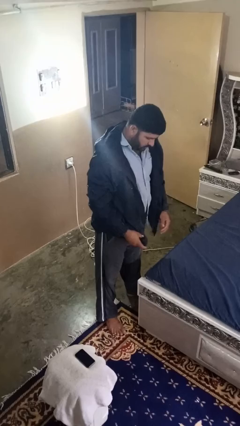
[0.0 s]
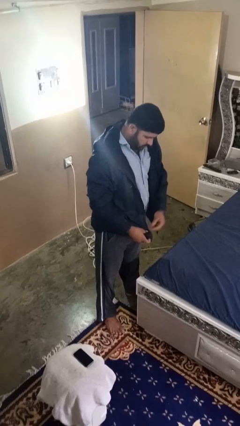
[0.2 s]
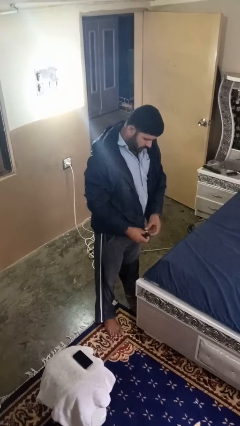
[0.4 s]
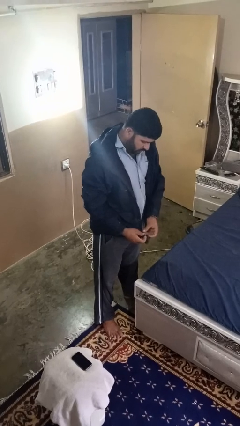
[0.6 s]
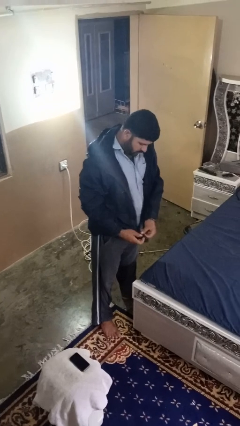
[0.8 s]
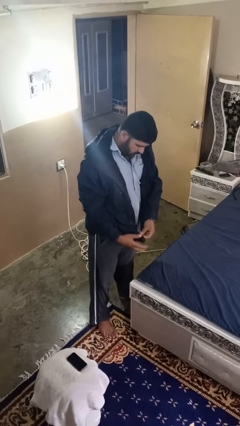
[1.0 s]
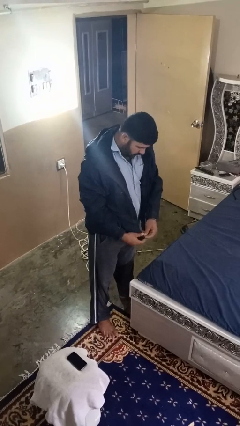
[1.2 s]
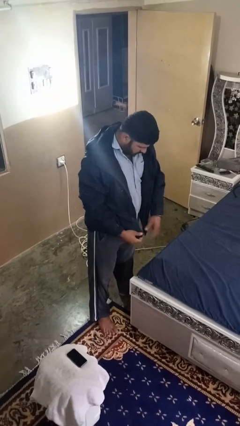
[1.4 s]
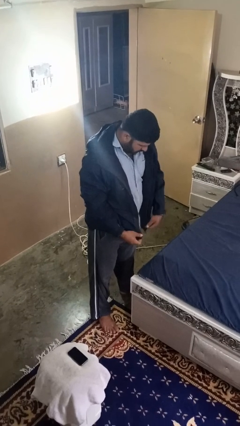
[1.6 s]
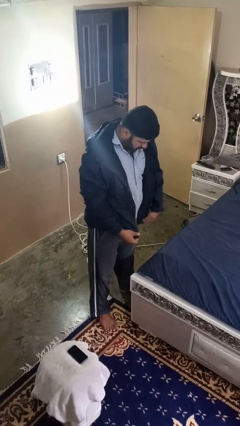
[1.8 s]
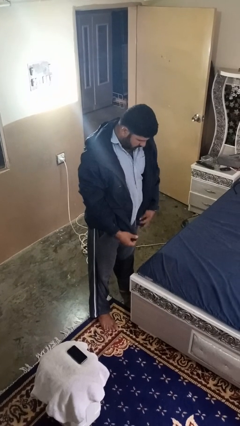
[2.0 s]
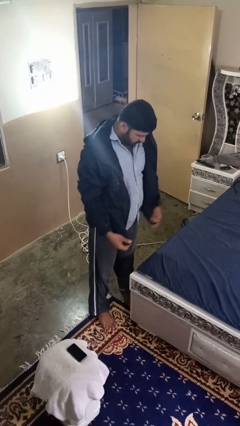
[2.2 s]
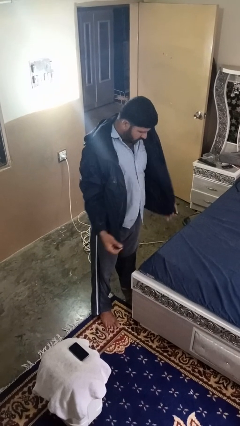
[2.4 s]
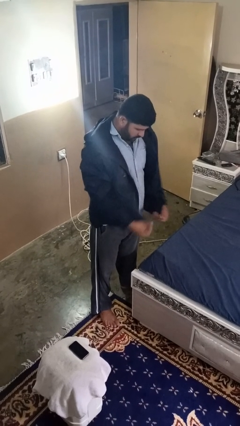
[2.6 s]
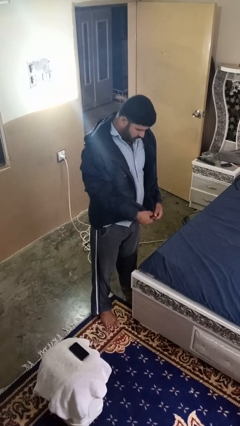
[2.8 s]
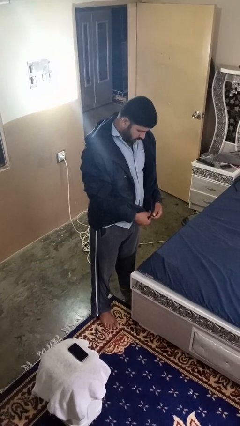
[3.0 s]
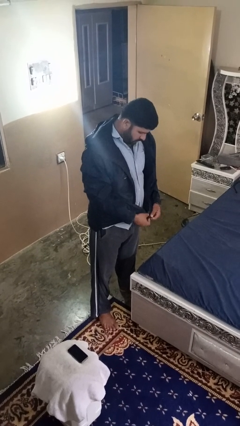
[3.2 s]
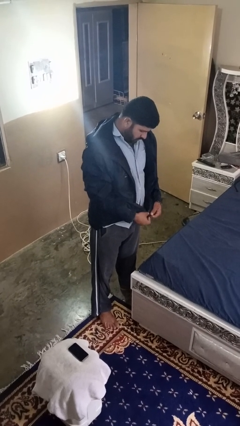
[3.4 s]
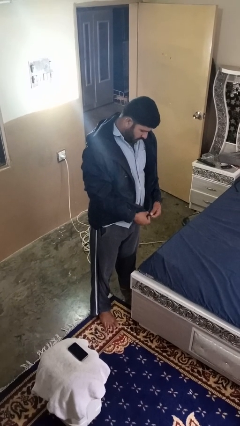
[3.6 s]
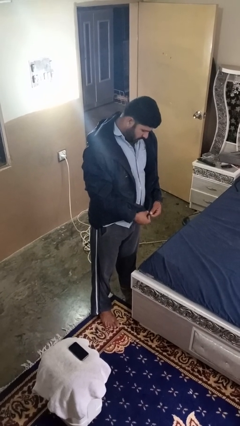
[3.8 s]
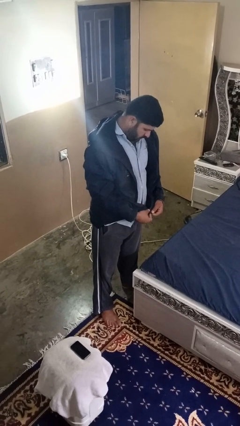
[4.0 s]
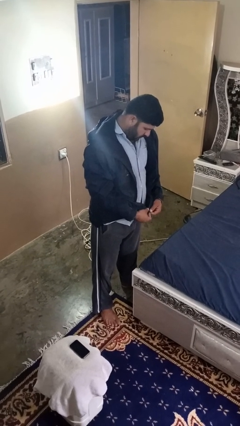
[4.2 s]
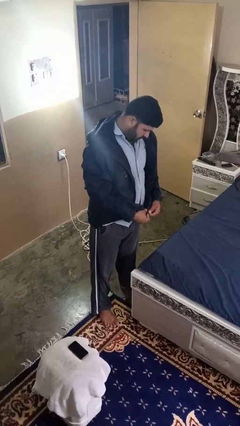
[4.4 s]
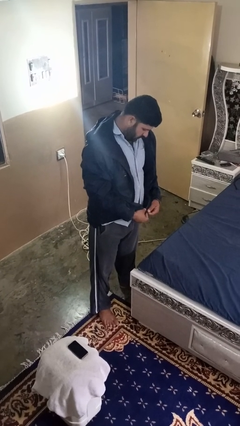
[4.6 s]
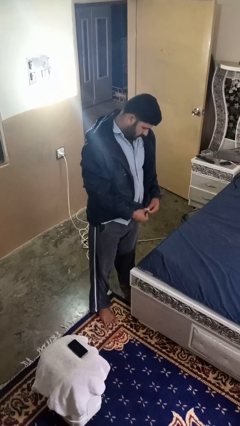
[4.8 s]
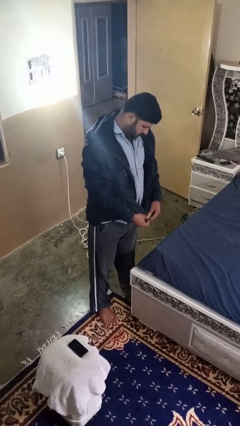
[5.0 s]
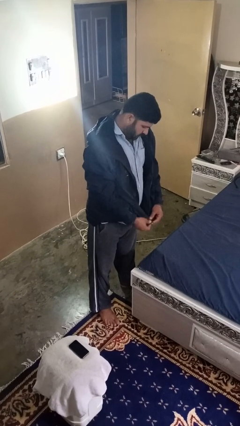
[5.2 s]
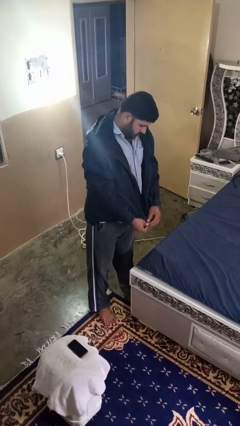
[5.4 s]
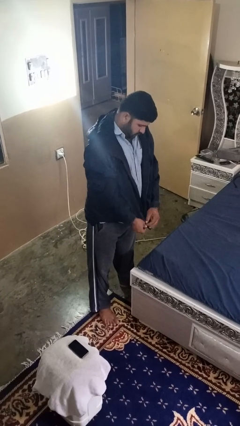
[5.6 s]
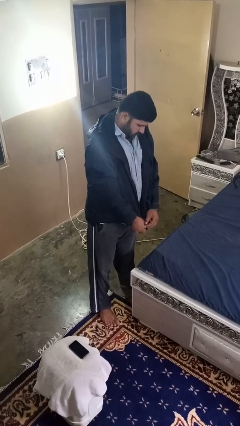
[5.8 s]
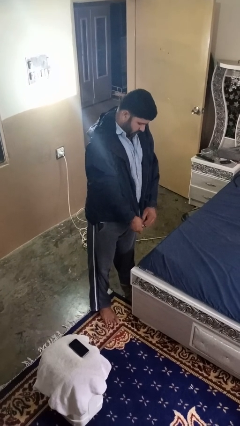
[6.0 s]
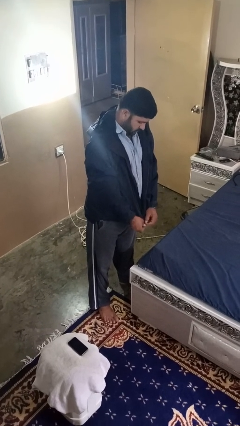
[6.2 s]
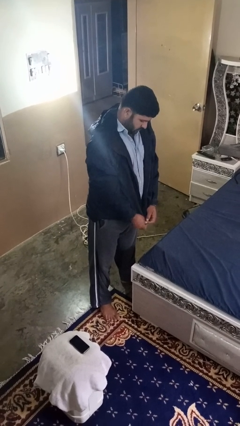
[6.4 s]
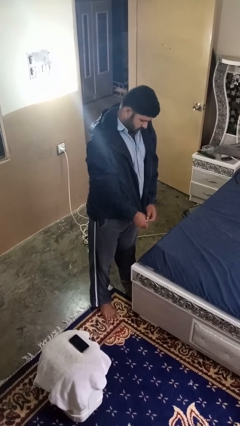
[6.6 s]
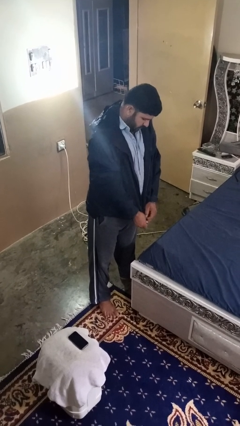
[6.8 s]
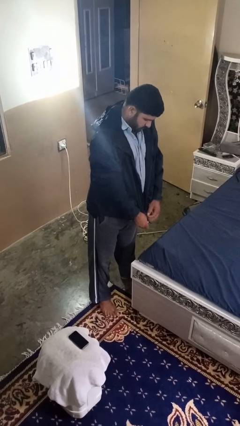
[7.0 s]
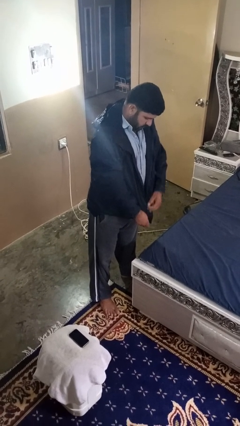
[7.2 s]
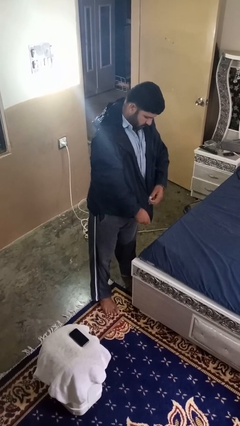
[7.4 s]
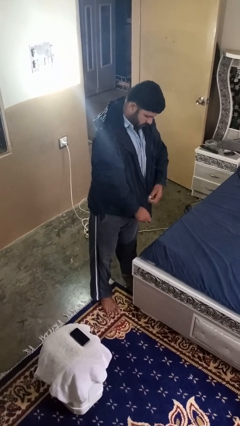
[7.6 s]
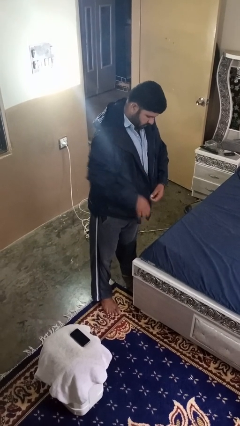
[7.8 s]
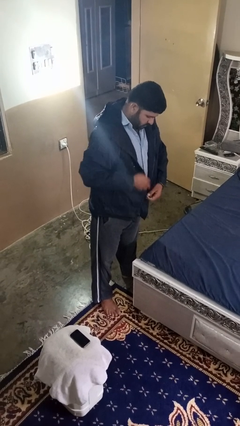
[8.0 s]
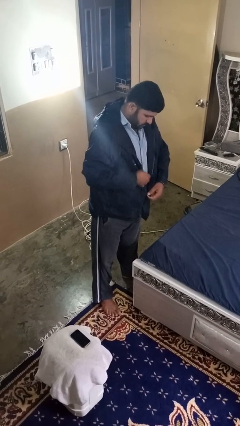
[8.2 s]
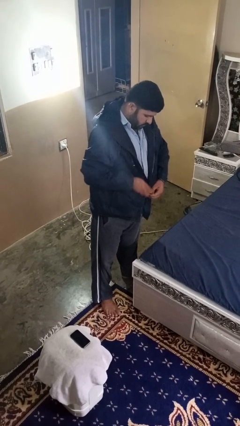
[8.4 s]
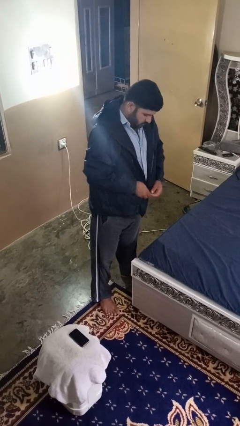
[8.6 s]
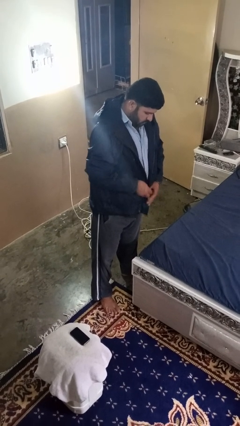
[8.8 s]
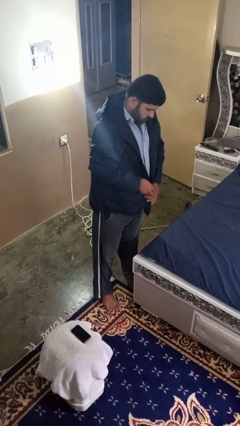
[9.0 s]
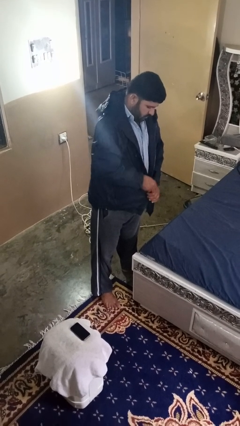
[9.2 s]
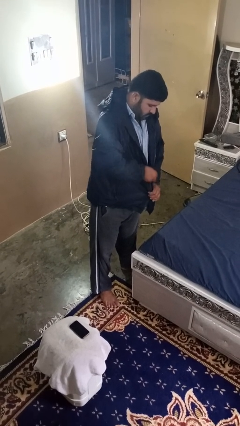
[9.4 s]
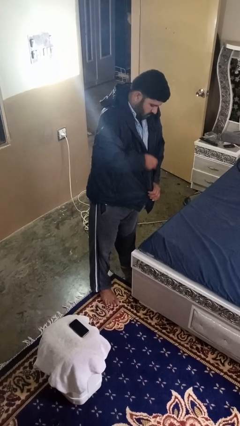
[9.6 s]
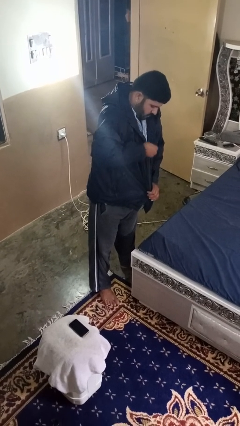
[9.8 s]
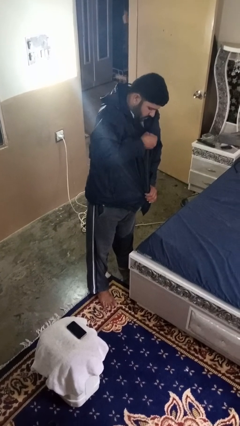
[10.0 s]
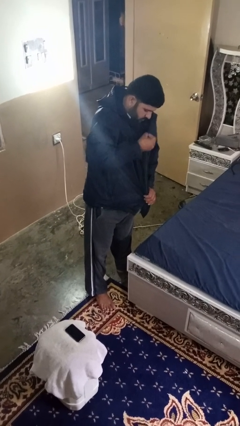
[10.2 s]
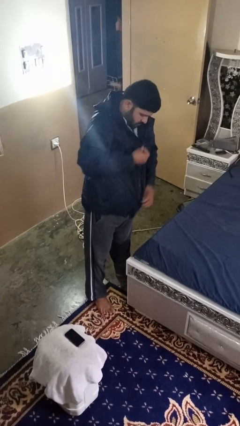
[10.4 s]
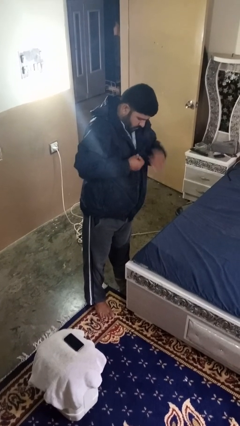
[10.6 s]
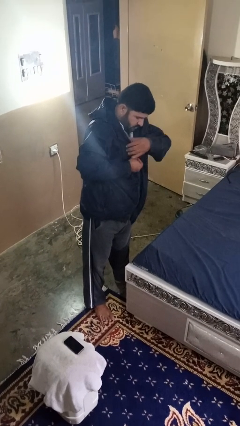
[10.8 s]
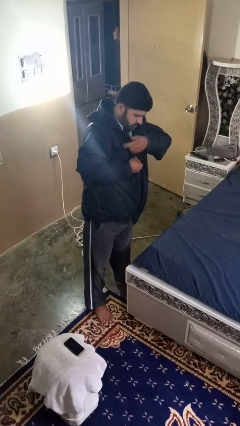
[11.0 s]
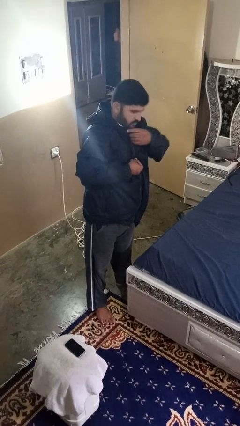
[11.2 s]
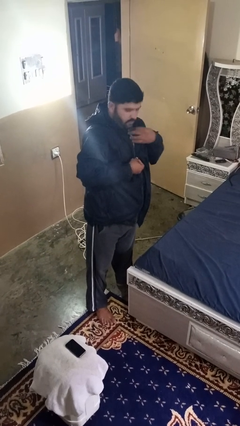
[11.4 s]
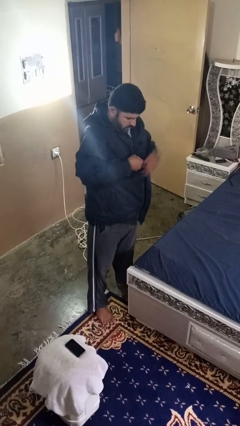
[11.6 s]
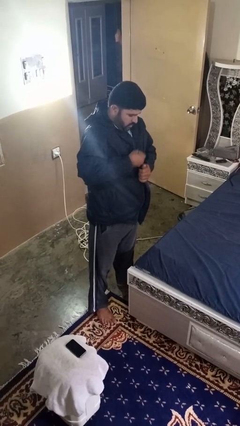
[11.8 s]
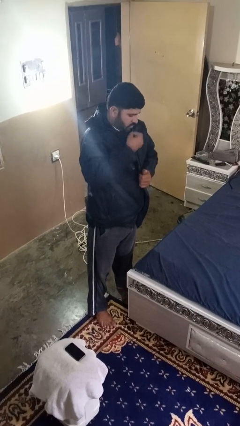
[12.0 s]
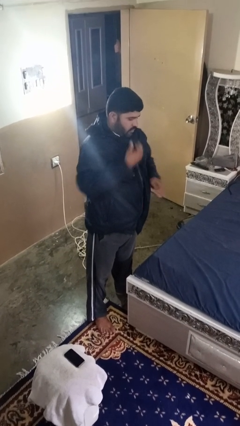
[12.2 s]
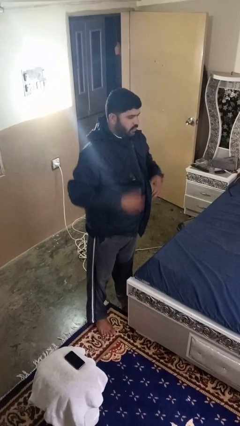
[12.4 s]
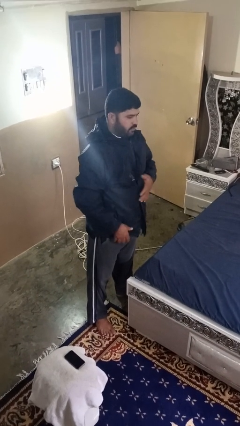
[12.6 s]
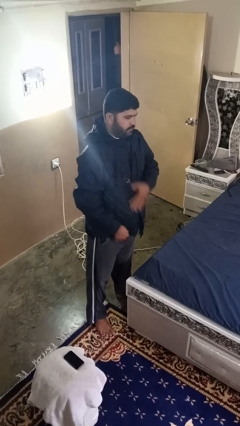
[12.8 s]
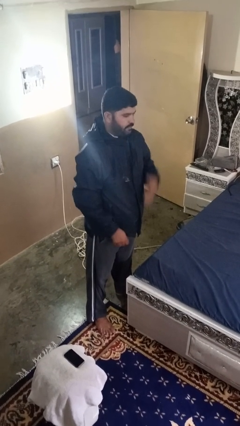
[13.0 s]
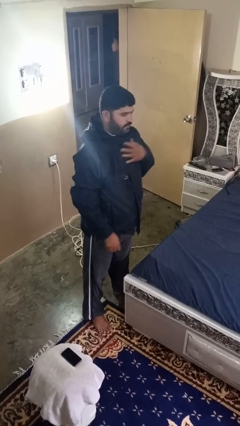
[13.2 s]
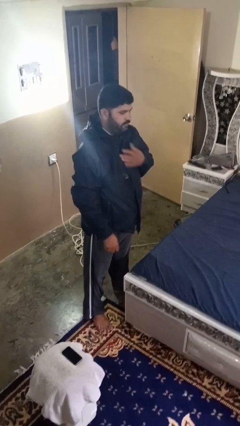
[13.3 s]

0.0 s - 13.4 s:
person zips up jacket

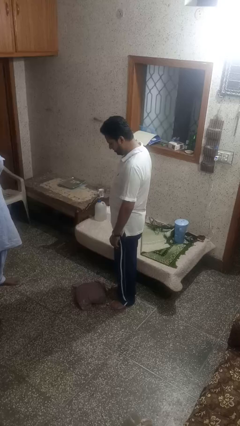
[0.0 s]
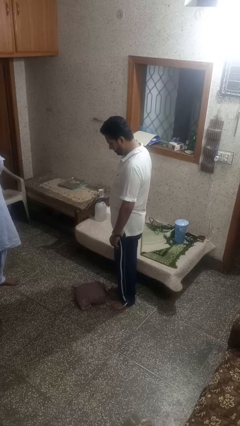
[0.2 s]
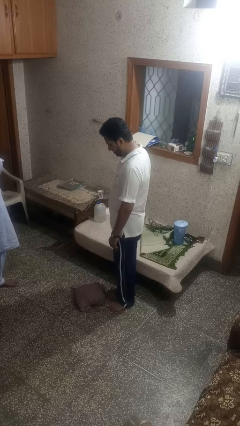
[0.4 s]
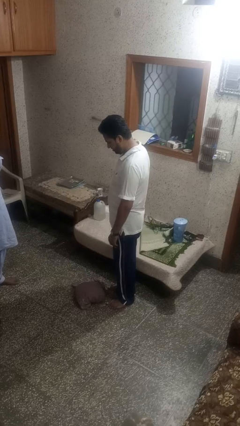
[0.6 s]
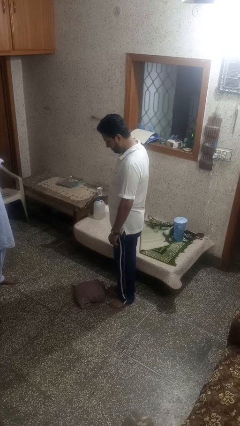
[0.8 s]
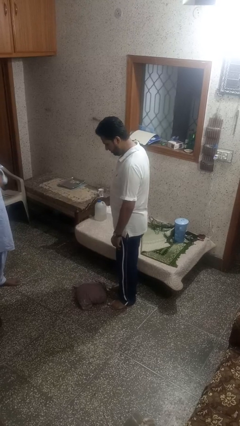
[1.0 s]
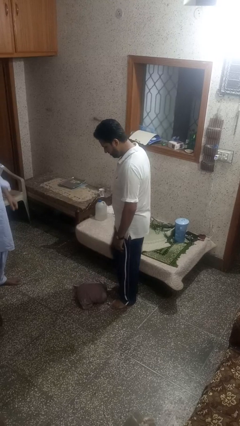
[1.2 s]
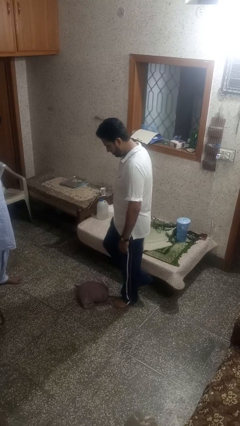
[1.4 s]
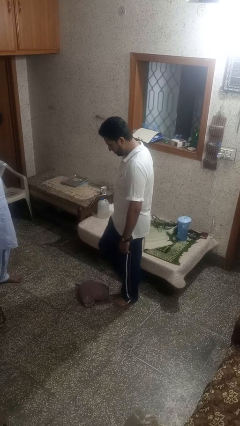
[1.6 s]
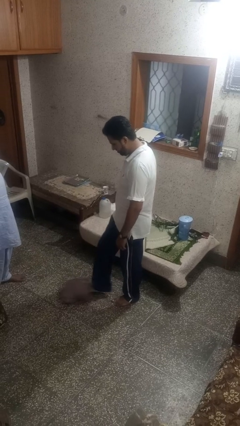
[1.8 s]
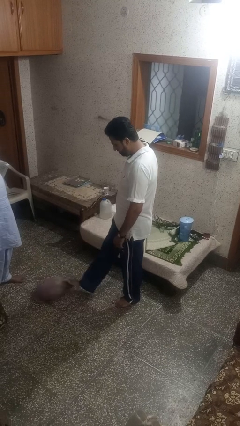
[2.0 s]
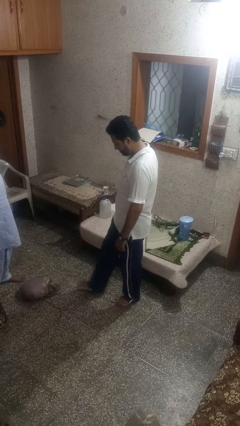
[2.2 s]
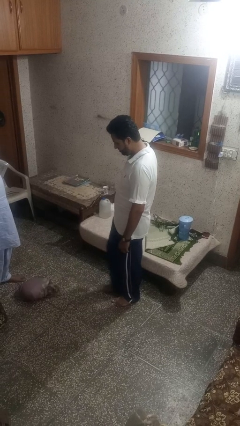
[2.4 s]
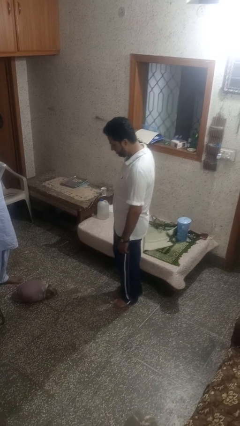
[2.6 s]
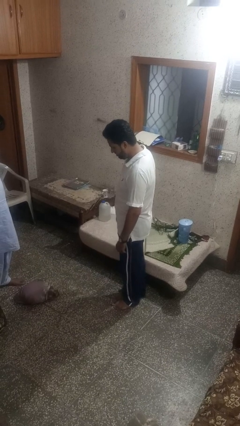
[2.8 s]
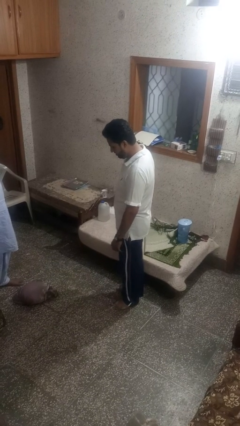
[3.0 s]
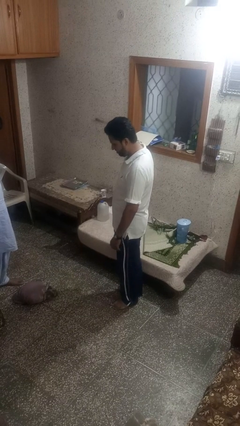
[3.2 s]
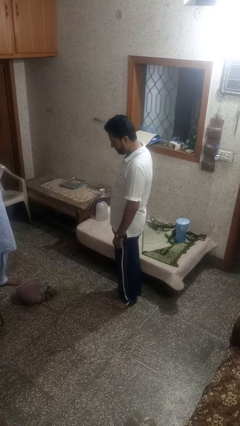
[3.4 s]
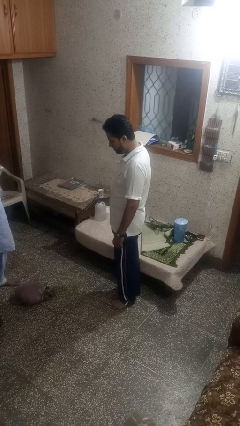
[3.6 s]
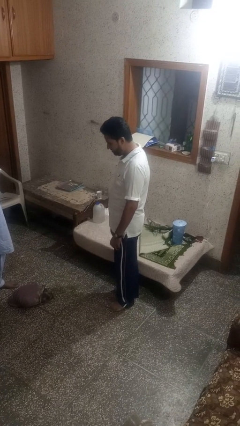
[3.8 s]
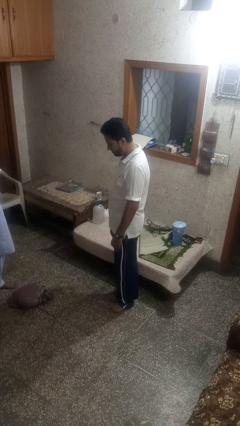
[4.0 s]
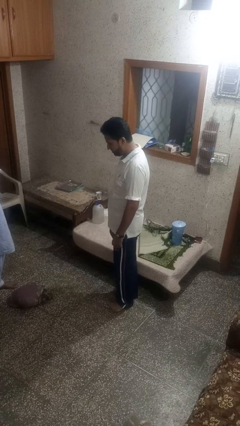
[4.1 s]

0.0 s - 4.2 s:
person kicks object to person
